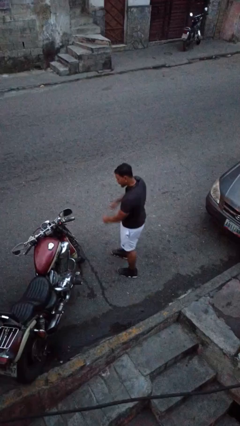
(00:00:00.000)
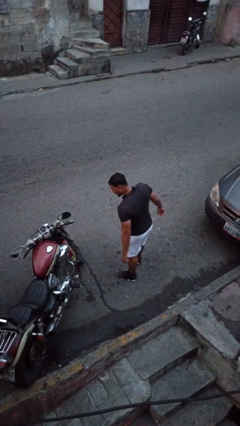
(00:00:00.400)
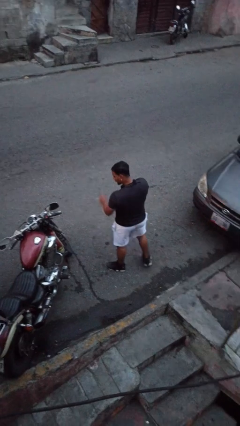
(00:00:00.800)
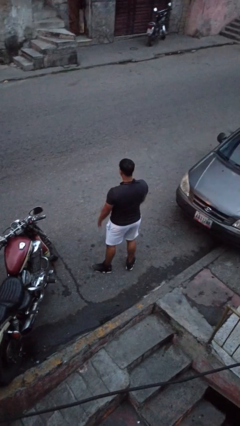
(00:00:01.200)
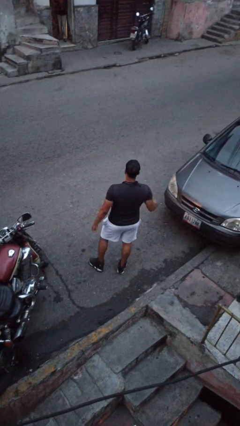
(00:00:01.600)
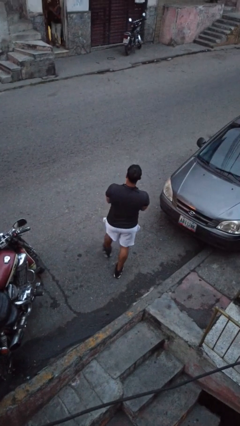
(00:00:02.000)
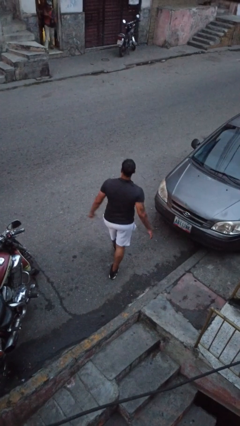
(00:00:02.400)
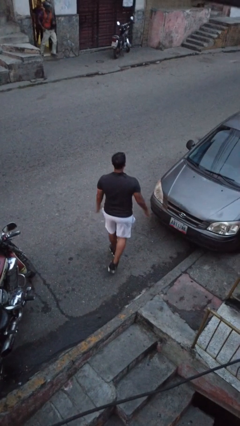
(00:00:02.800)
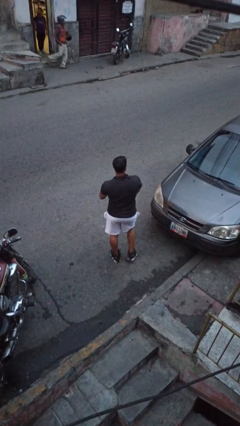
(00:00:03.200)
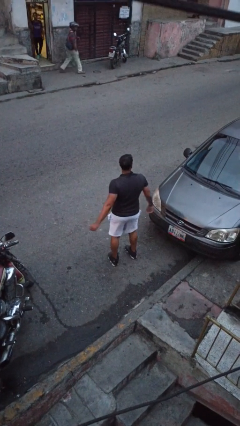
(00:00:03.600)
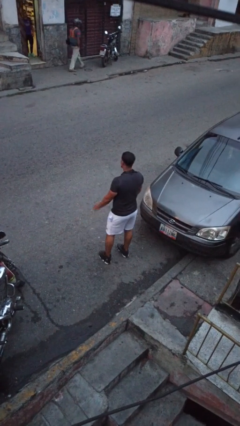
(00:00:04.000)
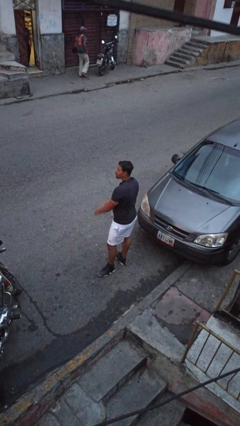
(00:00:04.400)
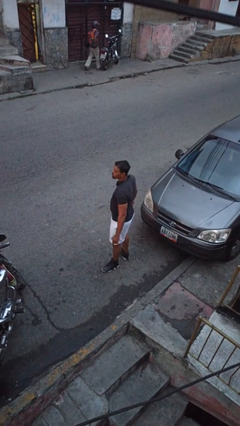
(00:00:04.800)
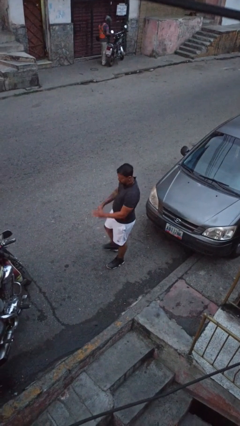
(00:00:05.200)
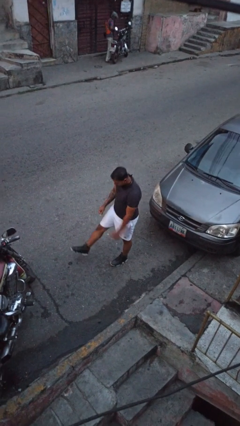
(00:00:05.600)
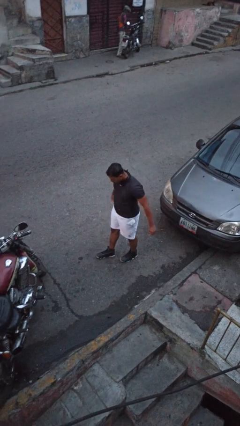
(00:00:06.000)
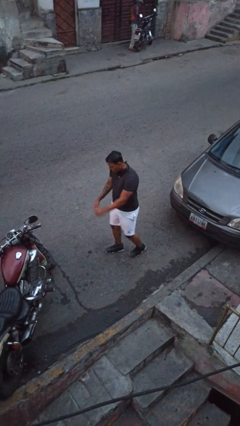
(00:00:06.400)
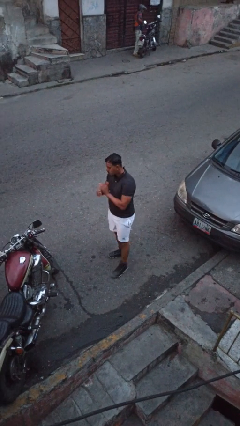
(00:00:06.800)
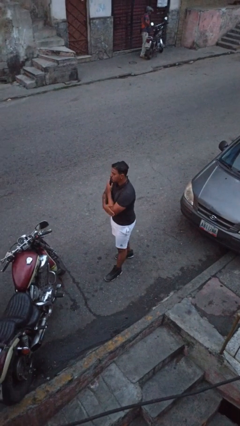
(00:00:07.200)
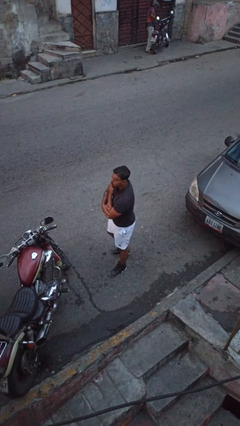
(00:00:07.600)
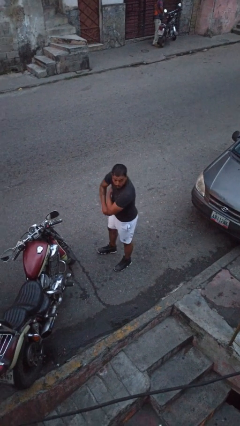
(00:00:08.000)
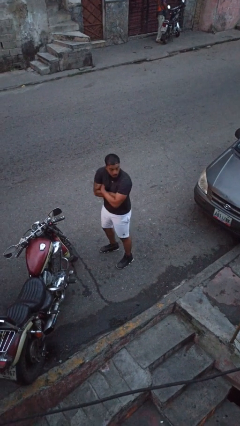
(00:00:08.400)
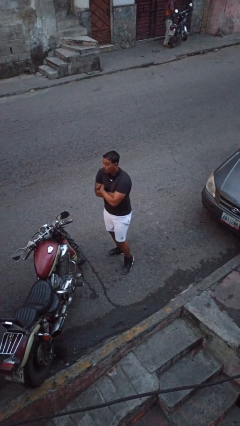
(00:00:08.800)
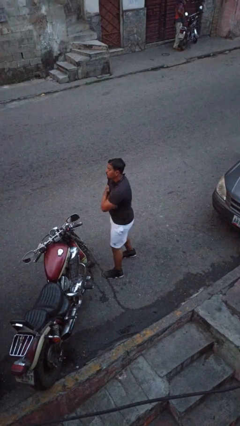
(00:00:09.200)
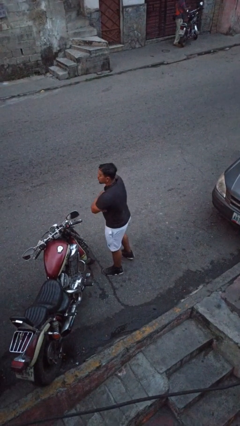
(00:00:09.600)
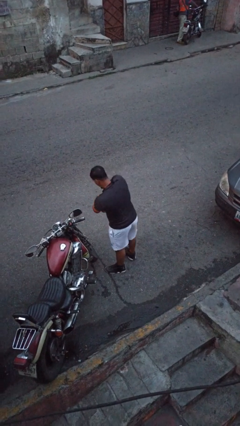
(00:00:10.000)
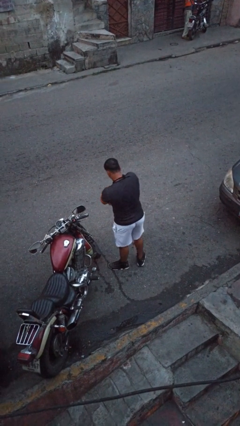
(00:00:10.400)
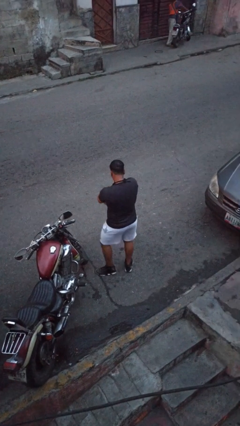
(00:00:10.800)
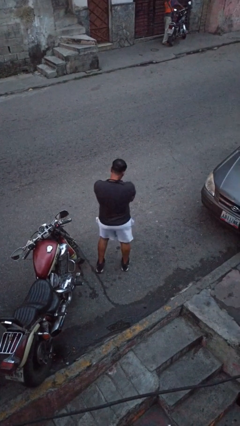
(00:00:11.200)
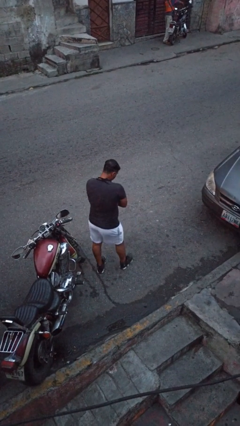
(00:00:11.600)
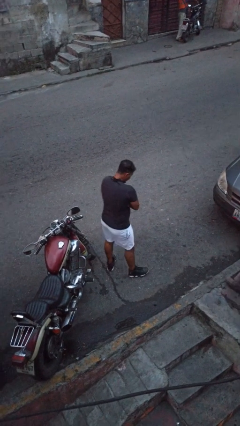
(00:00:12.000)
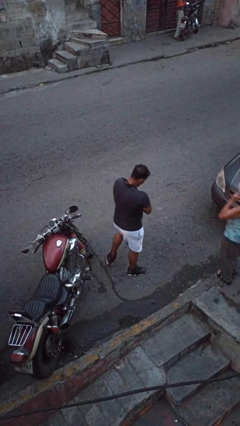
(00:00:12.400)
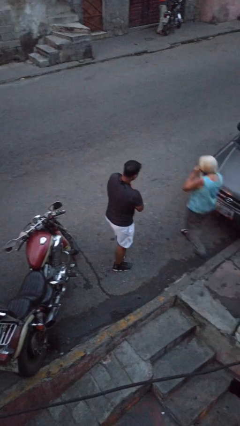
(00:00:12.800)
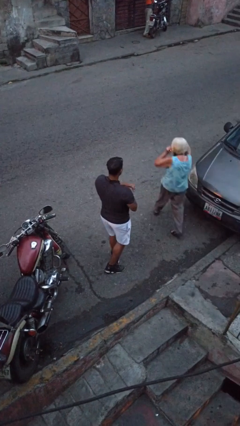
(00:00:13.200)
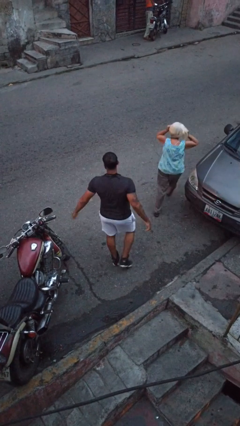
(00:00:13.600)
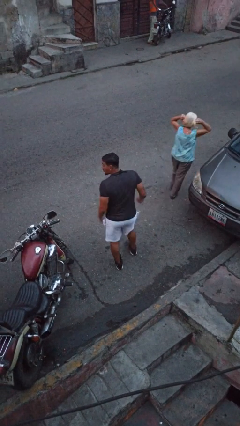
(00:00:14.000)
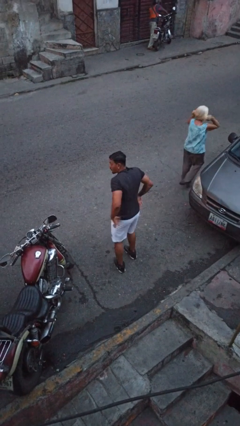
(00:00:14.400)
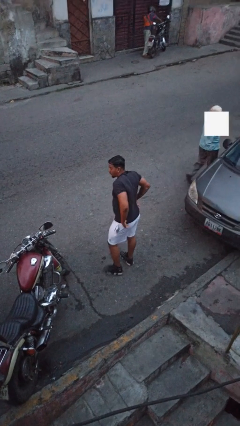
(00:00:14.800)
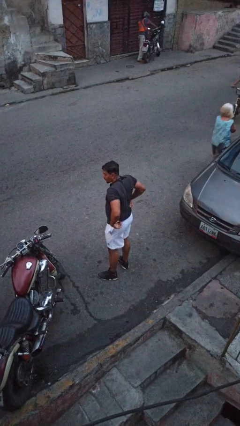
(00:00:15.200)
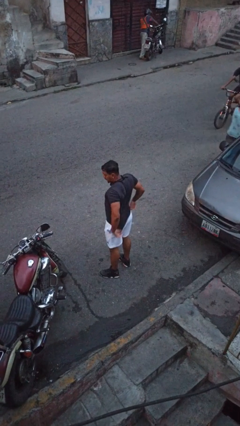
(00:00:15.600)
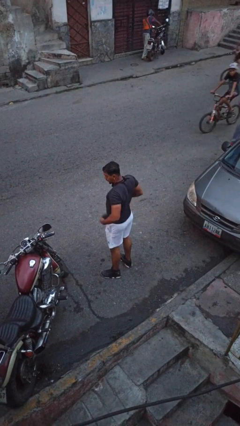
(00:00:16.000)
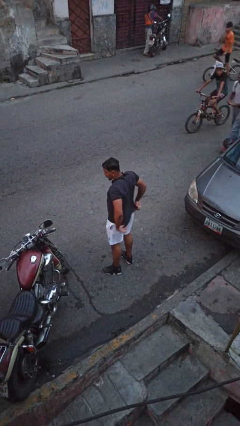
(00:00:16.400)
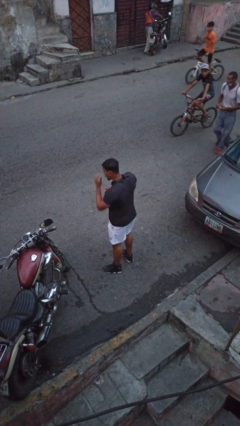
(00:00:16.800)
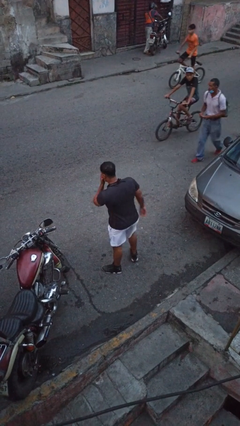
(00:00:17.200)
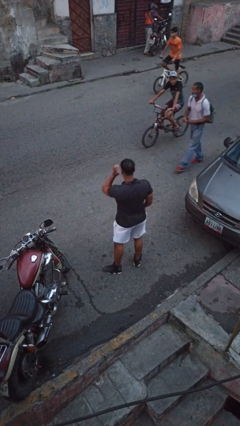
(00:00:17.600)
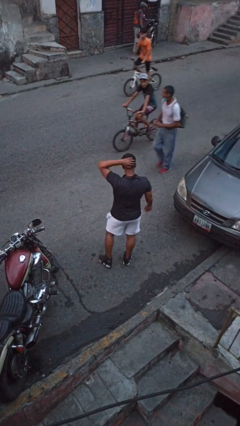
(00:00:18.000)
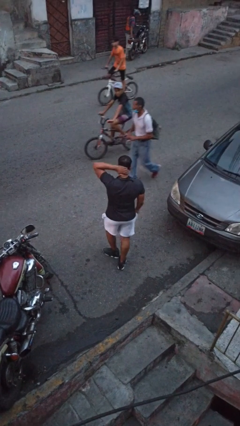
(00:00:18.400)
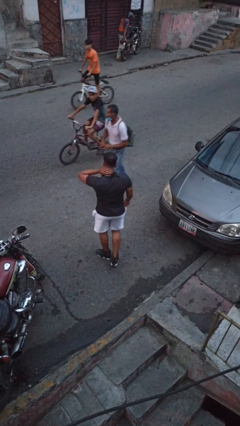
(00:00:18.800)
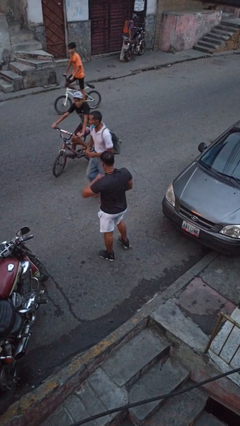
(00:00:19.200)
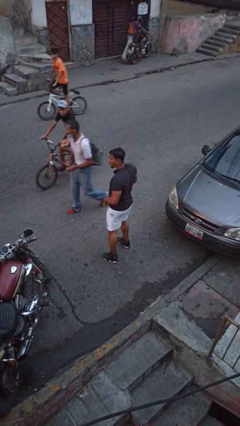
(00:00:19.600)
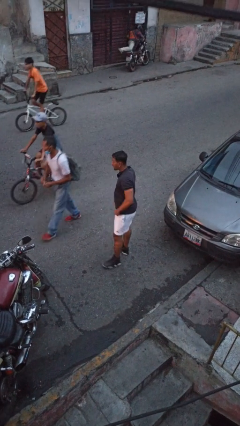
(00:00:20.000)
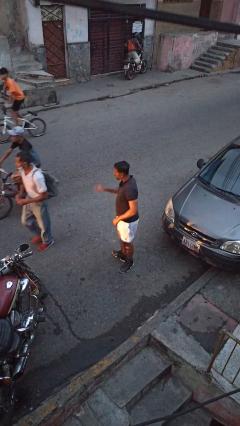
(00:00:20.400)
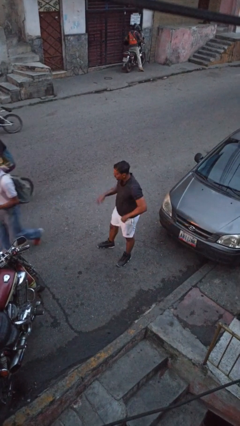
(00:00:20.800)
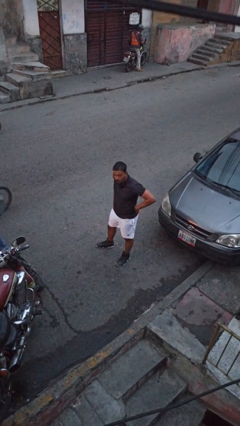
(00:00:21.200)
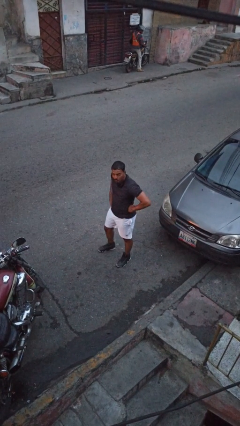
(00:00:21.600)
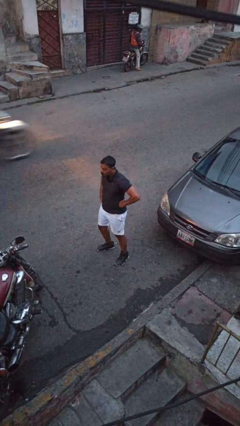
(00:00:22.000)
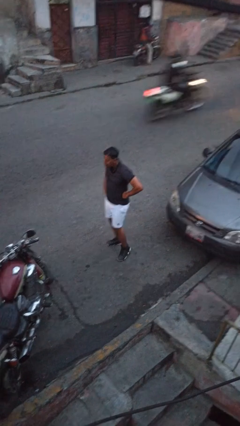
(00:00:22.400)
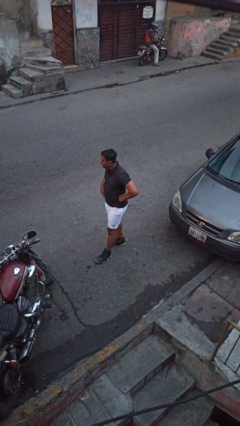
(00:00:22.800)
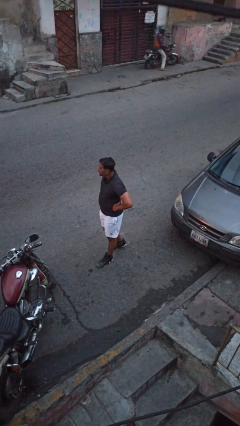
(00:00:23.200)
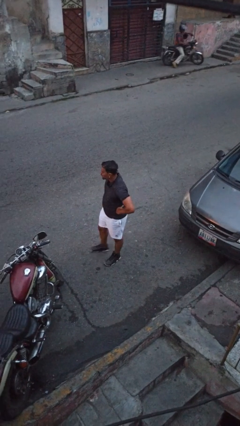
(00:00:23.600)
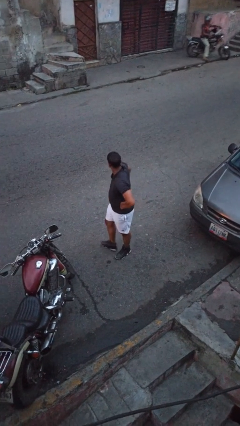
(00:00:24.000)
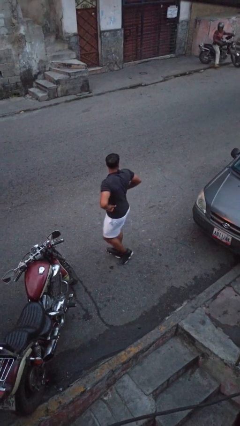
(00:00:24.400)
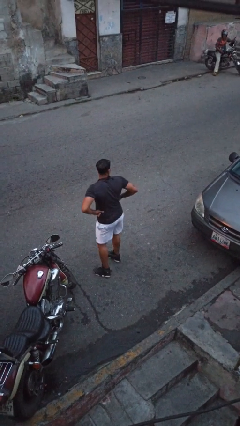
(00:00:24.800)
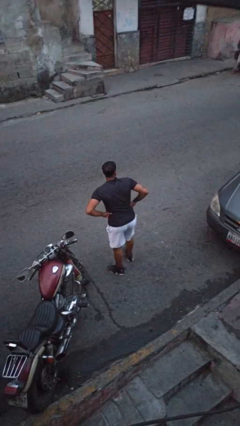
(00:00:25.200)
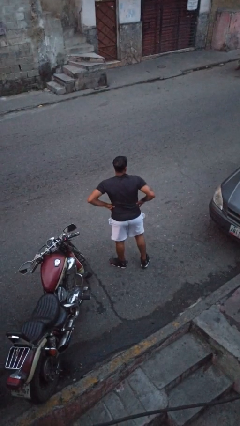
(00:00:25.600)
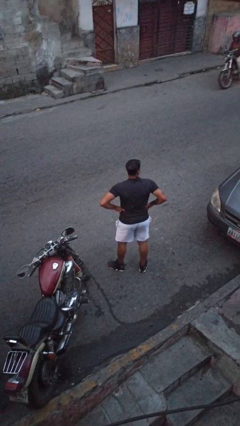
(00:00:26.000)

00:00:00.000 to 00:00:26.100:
person walks

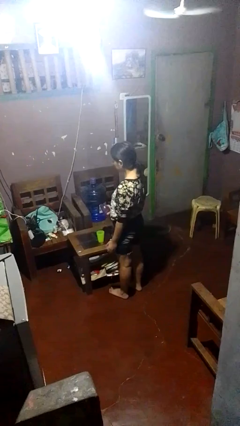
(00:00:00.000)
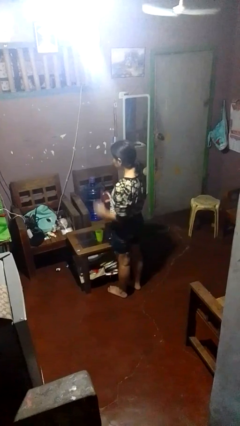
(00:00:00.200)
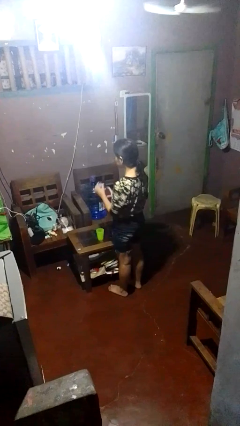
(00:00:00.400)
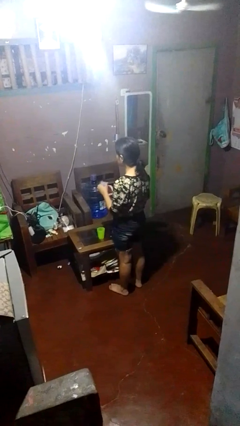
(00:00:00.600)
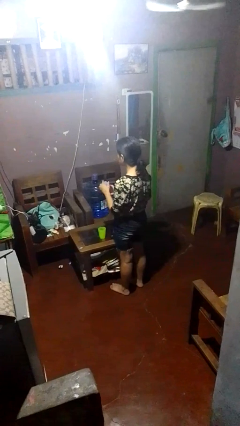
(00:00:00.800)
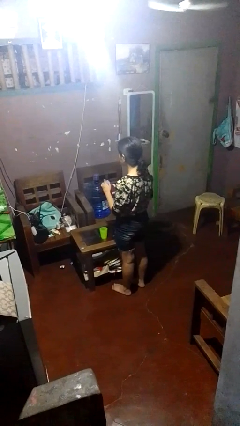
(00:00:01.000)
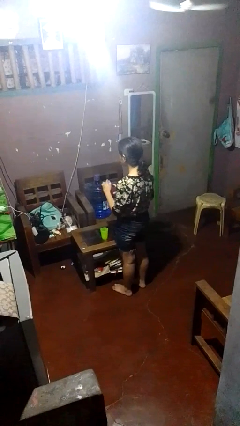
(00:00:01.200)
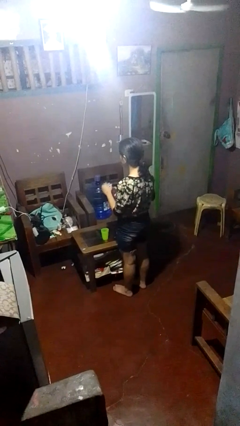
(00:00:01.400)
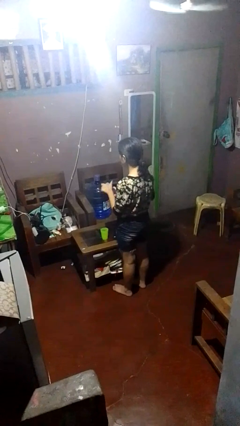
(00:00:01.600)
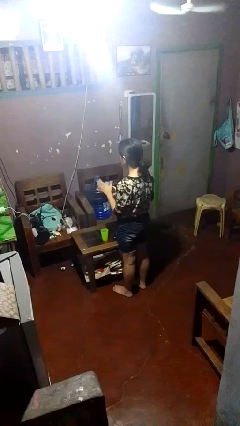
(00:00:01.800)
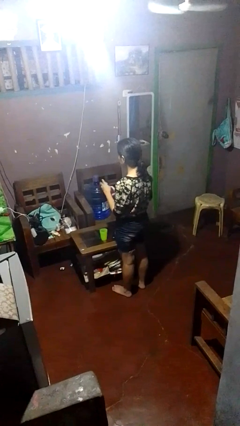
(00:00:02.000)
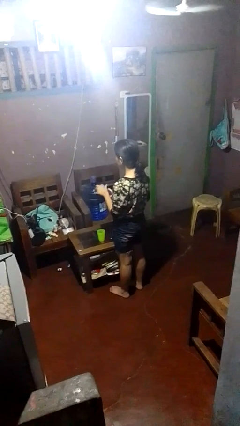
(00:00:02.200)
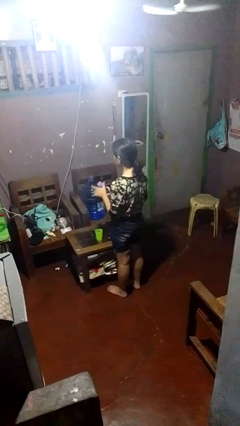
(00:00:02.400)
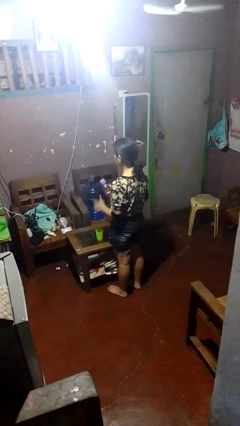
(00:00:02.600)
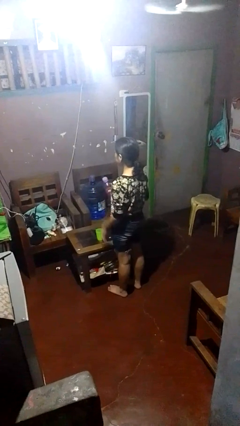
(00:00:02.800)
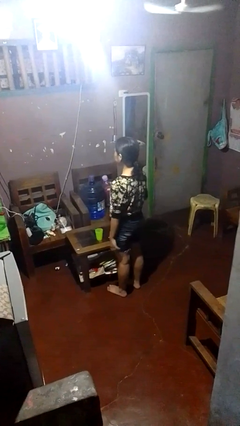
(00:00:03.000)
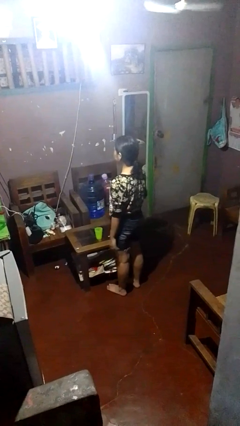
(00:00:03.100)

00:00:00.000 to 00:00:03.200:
person screws lid to bottle

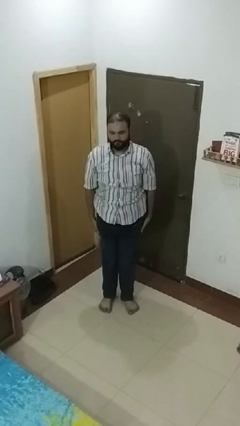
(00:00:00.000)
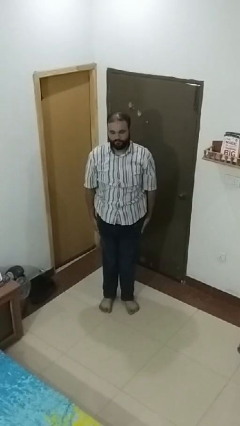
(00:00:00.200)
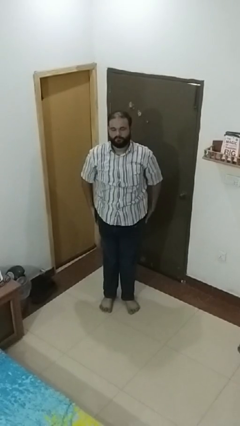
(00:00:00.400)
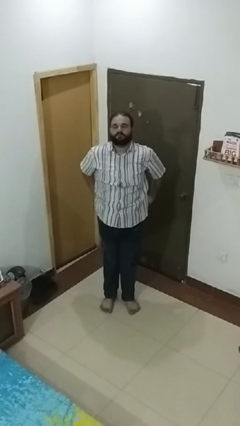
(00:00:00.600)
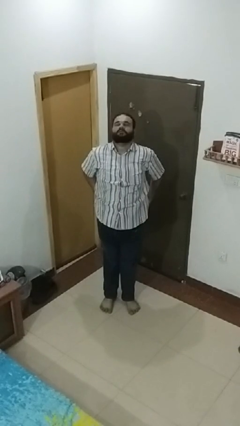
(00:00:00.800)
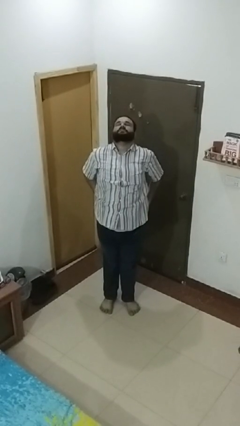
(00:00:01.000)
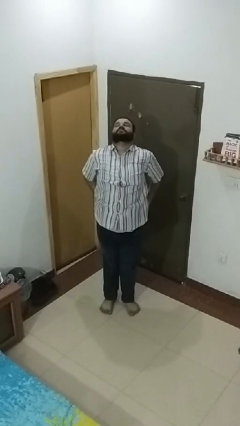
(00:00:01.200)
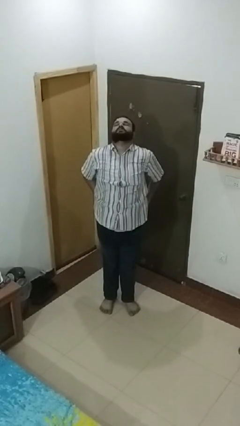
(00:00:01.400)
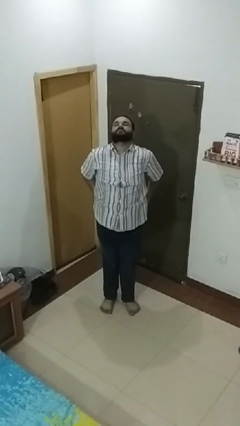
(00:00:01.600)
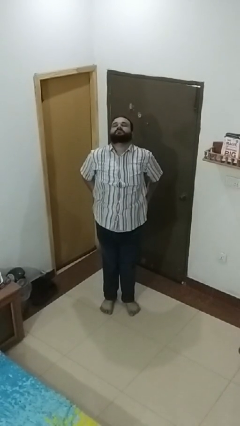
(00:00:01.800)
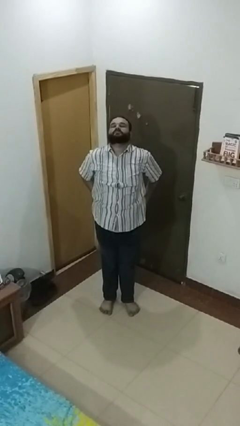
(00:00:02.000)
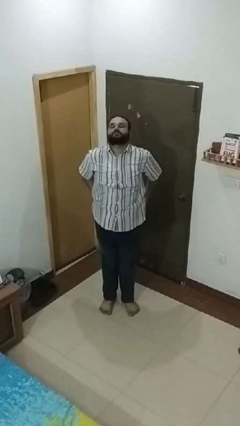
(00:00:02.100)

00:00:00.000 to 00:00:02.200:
person stretches back
